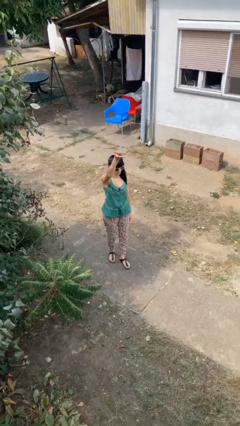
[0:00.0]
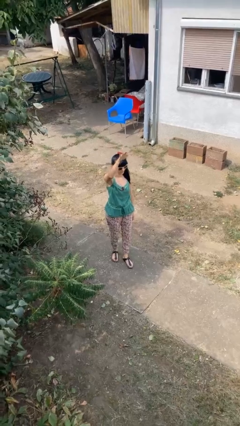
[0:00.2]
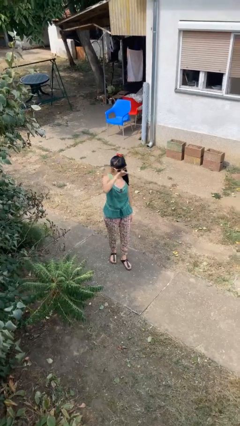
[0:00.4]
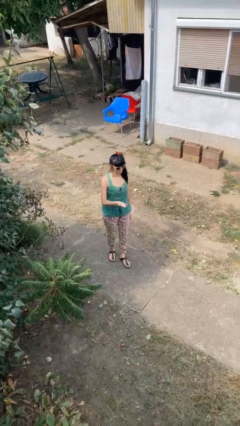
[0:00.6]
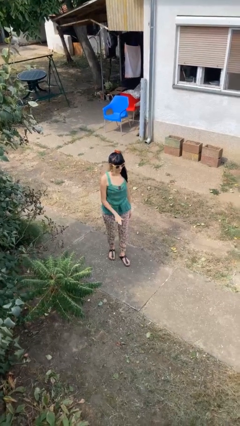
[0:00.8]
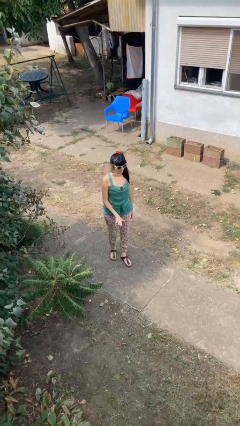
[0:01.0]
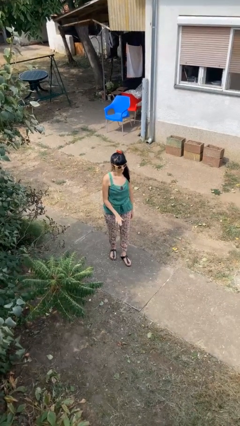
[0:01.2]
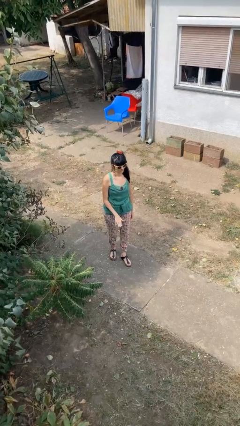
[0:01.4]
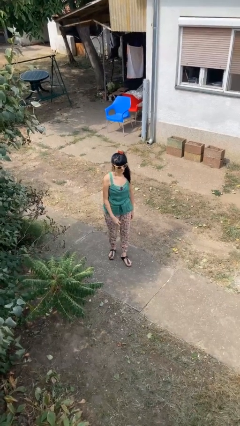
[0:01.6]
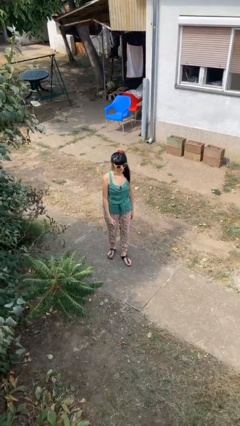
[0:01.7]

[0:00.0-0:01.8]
person gestures swipe down

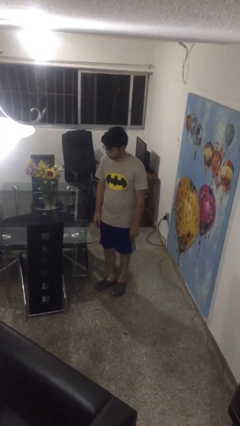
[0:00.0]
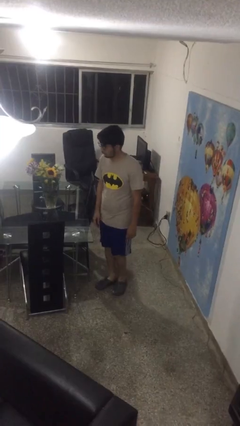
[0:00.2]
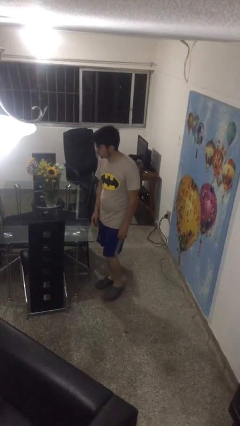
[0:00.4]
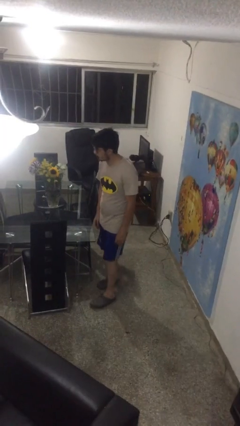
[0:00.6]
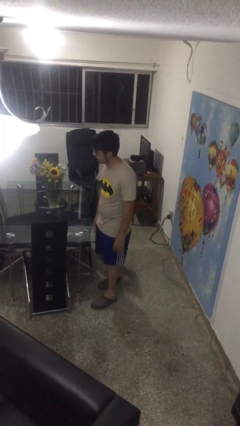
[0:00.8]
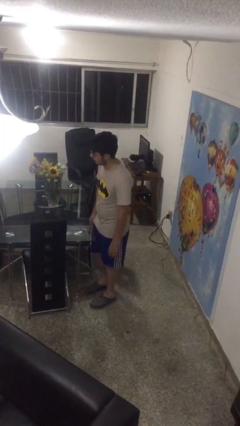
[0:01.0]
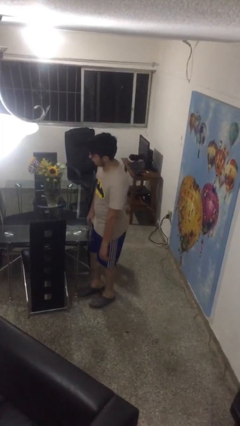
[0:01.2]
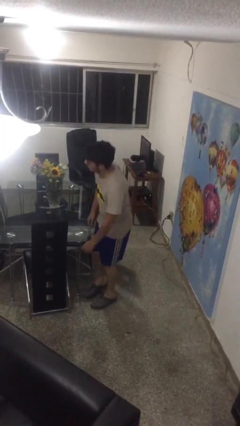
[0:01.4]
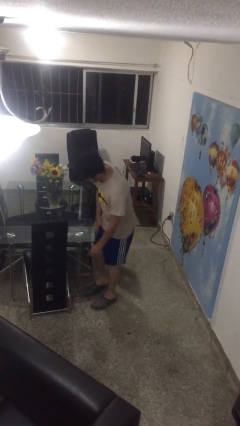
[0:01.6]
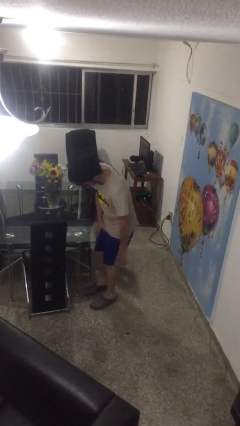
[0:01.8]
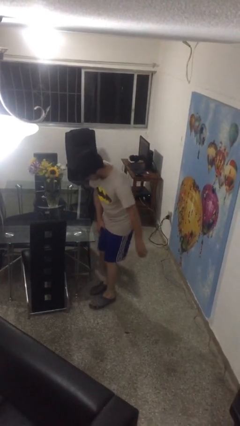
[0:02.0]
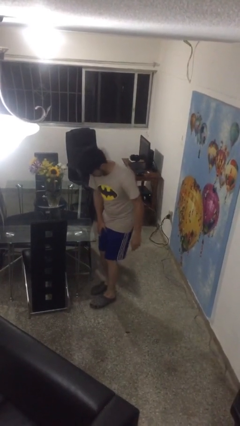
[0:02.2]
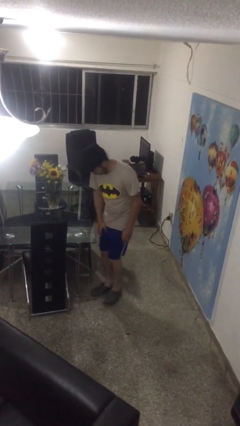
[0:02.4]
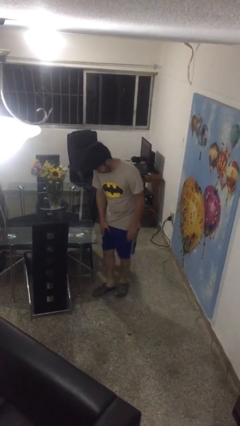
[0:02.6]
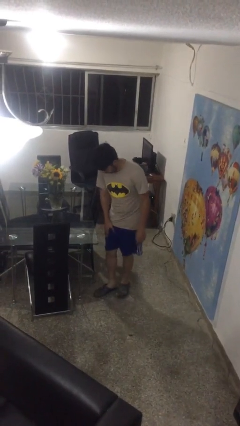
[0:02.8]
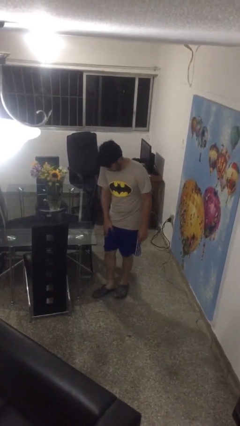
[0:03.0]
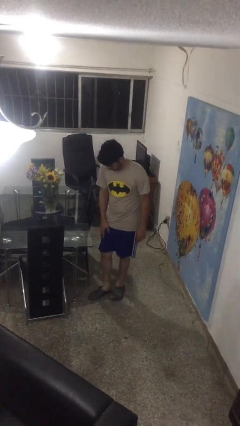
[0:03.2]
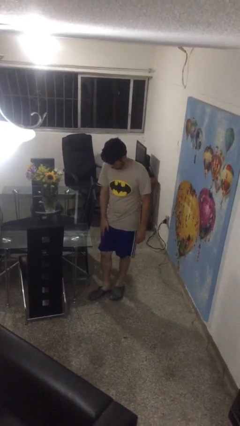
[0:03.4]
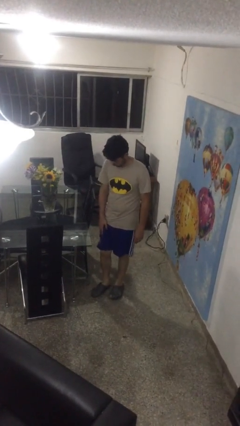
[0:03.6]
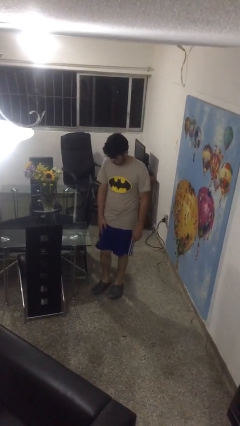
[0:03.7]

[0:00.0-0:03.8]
person bumps into table

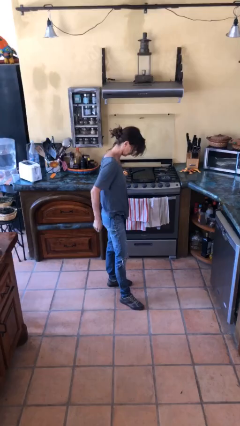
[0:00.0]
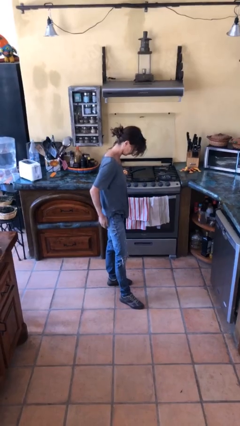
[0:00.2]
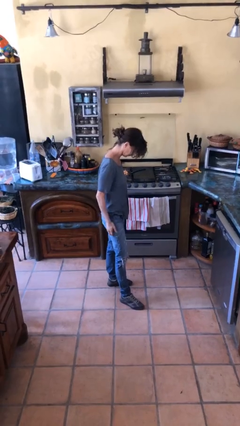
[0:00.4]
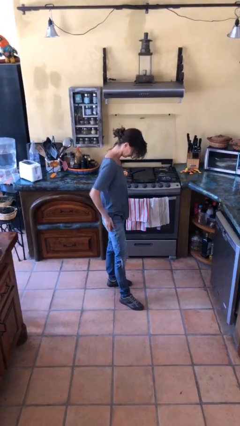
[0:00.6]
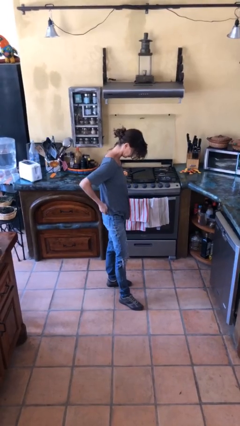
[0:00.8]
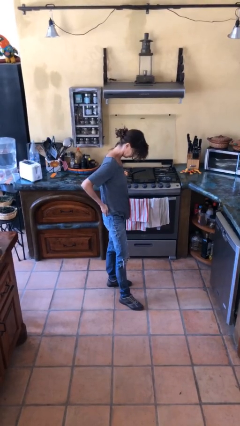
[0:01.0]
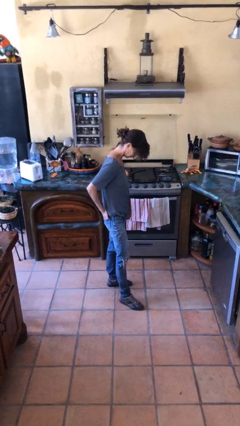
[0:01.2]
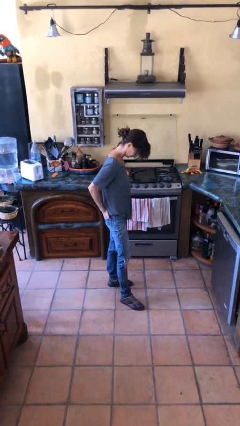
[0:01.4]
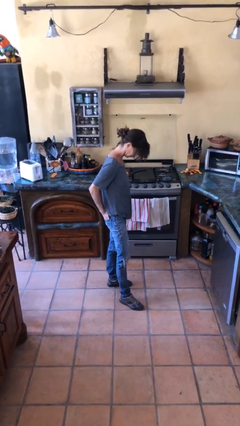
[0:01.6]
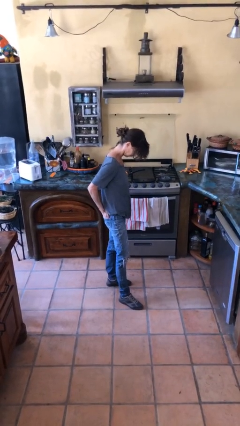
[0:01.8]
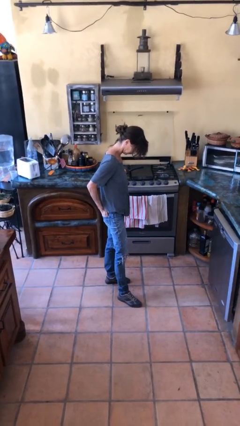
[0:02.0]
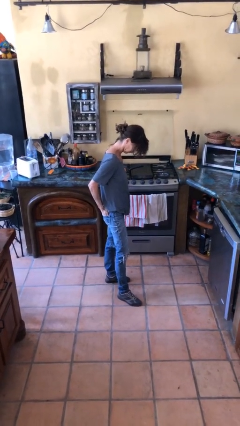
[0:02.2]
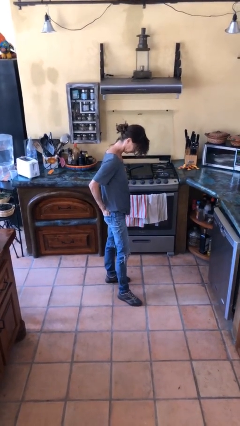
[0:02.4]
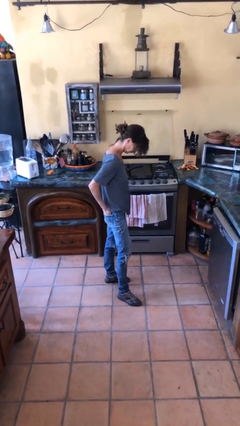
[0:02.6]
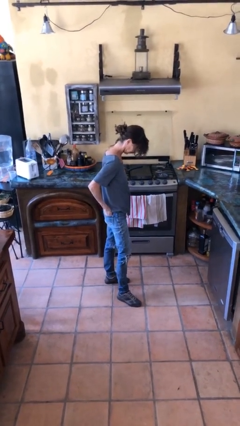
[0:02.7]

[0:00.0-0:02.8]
person puts hands in back pockets

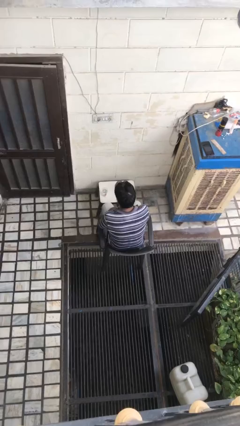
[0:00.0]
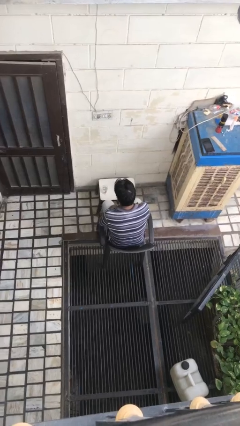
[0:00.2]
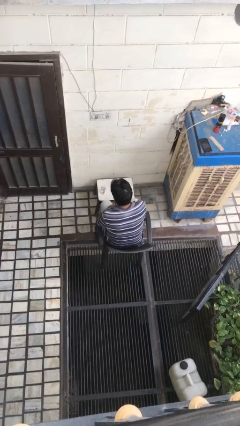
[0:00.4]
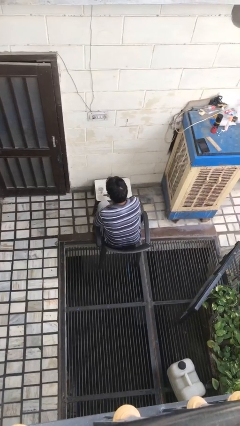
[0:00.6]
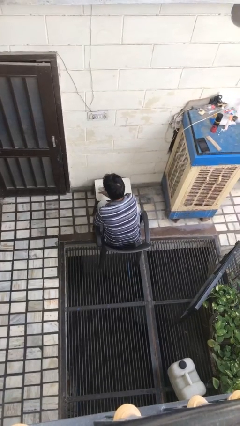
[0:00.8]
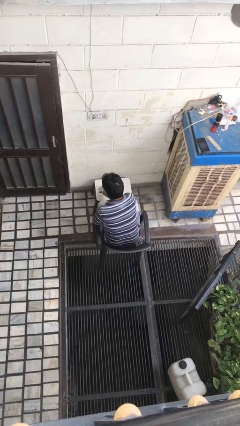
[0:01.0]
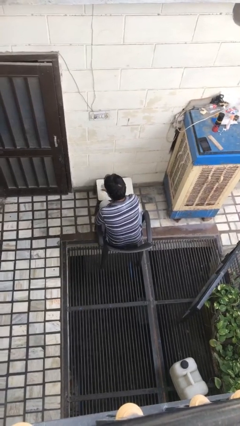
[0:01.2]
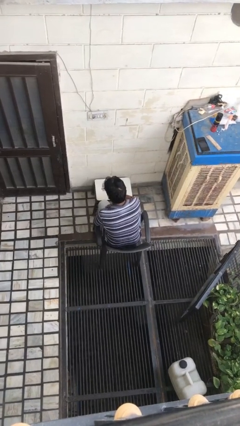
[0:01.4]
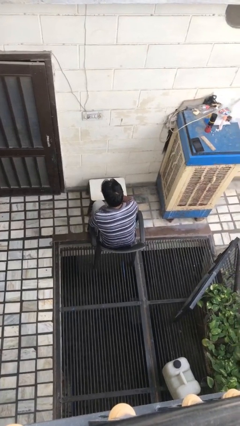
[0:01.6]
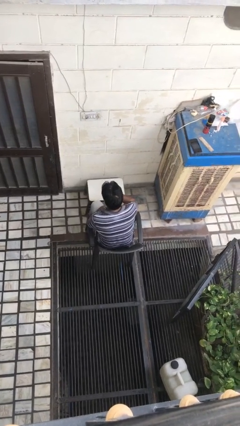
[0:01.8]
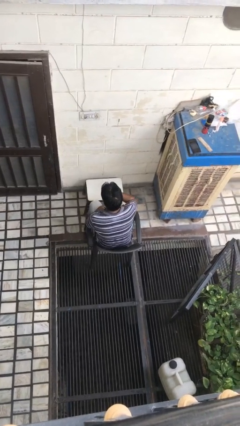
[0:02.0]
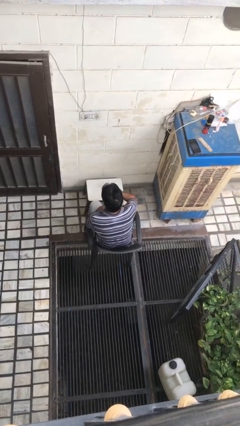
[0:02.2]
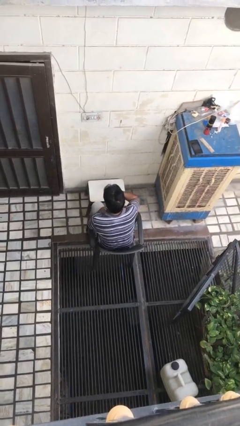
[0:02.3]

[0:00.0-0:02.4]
person picks up object from table

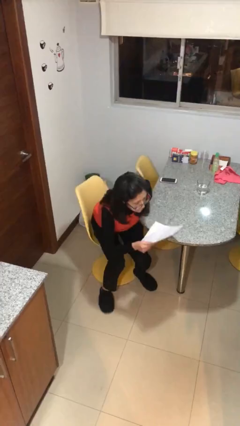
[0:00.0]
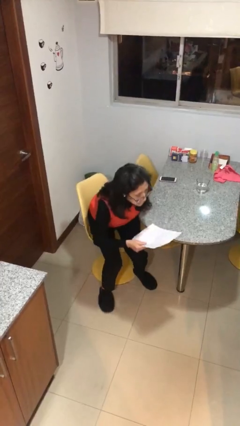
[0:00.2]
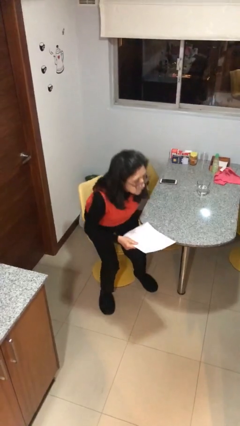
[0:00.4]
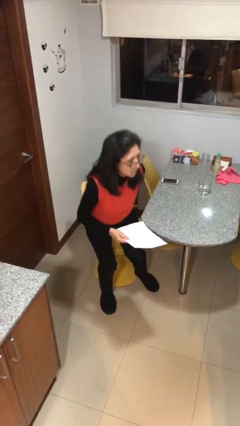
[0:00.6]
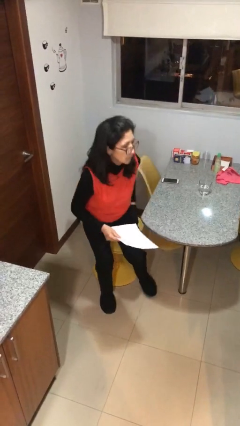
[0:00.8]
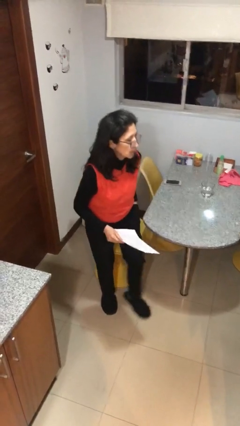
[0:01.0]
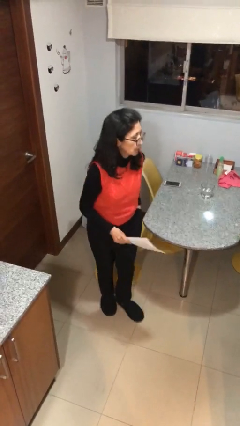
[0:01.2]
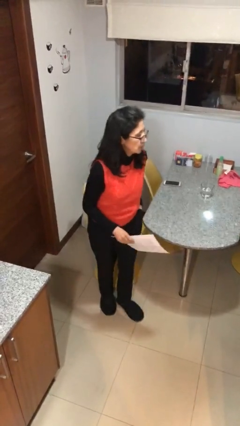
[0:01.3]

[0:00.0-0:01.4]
person stands up

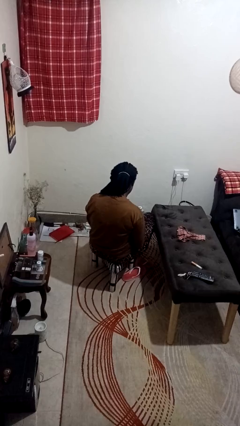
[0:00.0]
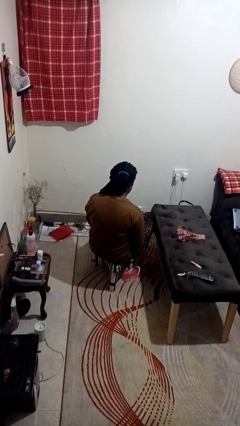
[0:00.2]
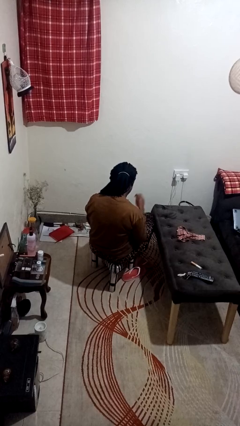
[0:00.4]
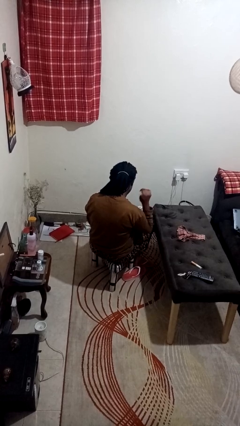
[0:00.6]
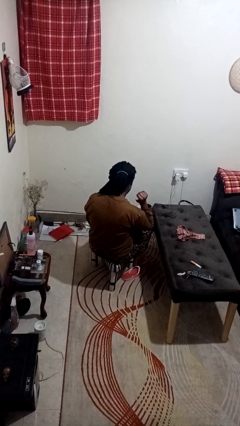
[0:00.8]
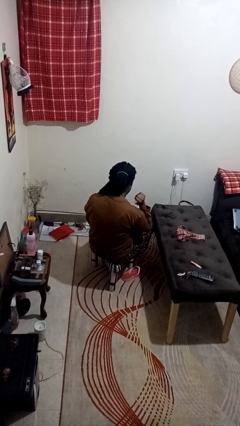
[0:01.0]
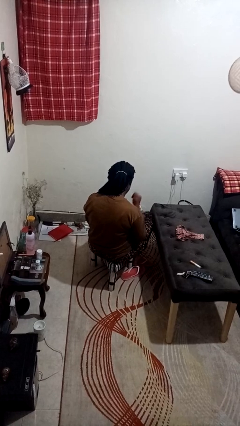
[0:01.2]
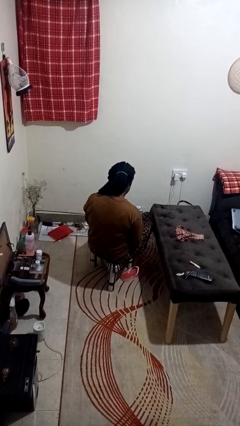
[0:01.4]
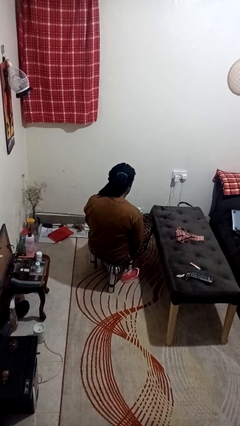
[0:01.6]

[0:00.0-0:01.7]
person gestures behind me

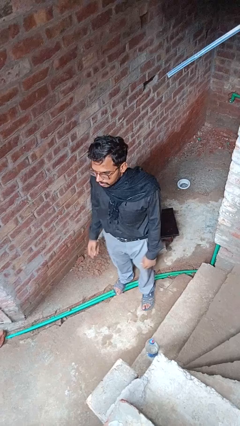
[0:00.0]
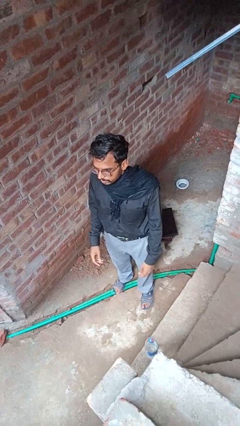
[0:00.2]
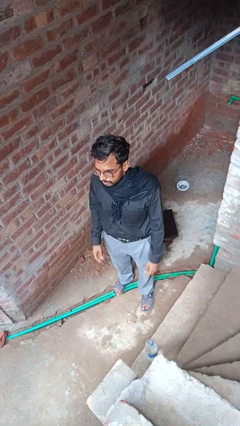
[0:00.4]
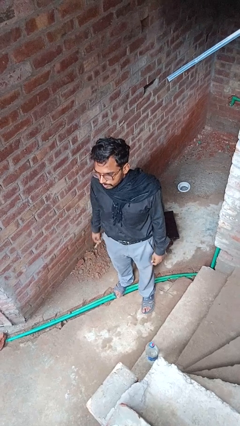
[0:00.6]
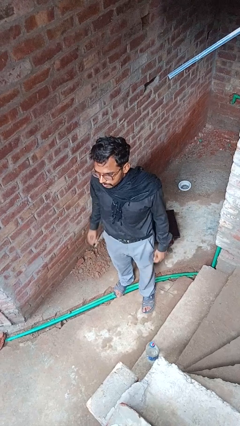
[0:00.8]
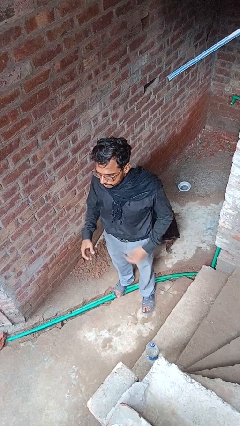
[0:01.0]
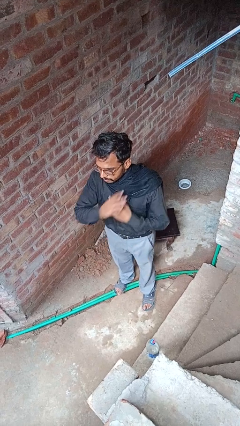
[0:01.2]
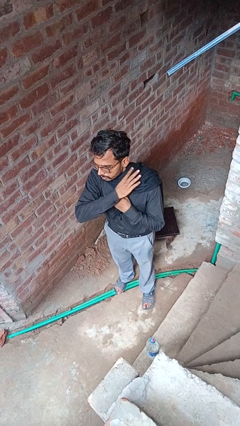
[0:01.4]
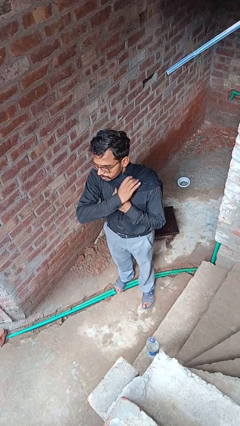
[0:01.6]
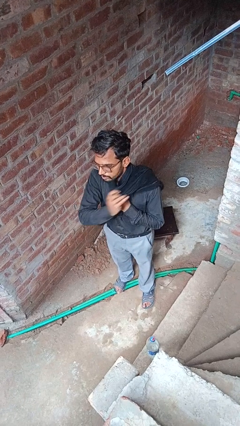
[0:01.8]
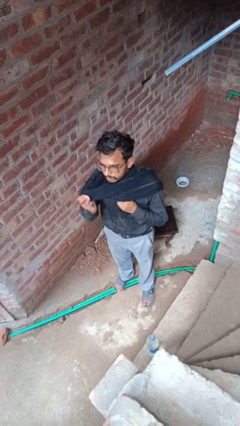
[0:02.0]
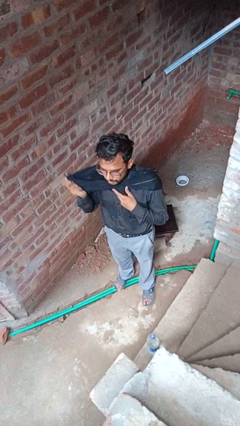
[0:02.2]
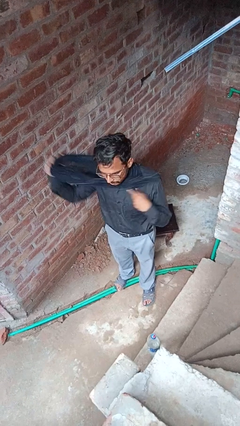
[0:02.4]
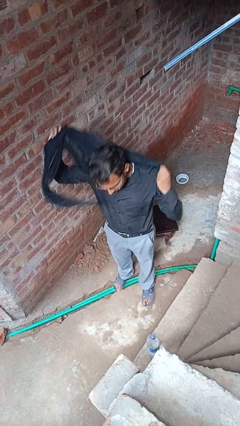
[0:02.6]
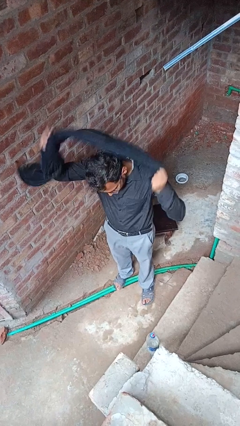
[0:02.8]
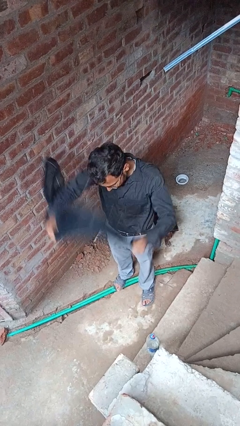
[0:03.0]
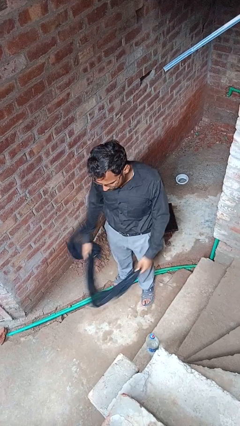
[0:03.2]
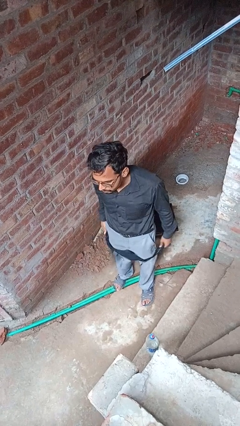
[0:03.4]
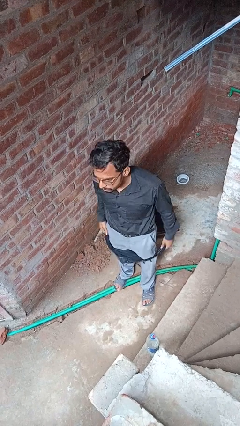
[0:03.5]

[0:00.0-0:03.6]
person takes off scarf
